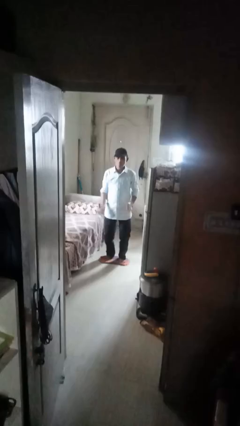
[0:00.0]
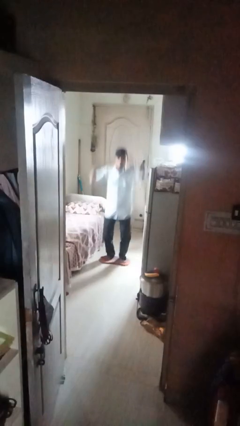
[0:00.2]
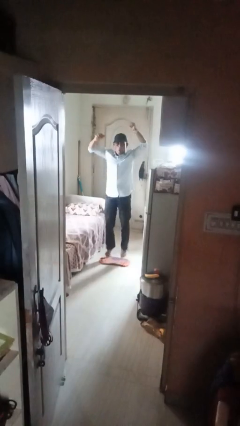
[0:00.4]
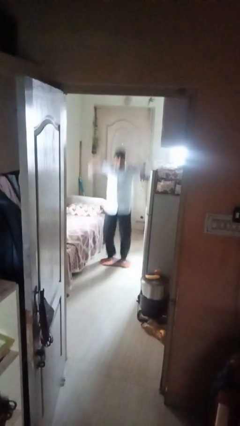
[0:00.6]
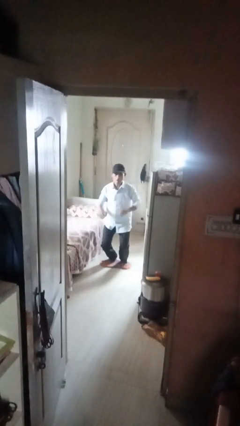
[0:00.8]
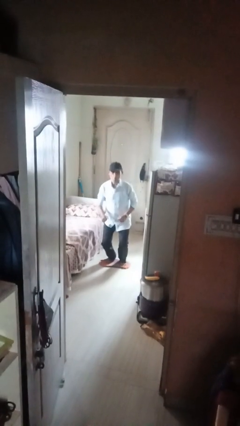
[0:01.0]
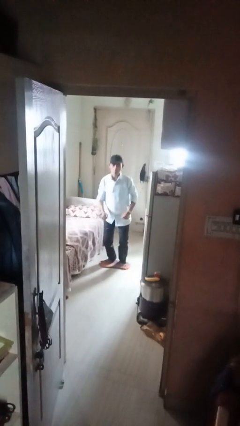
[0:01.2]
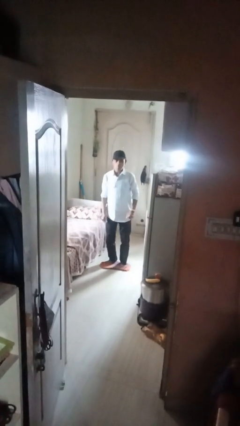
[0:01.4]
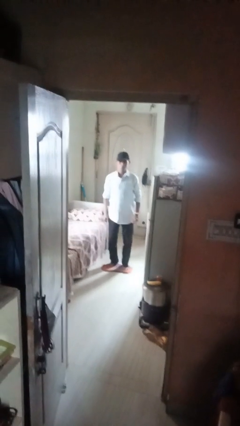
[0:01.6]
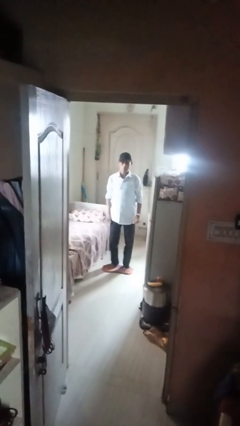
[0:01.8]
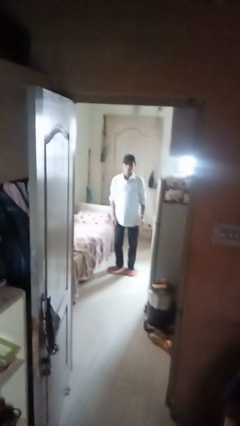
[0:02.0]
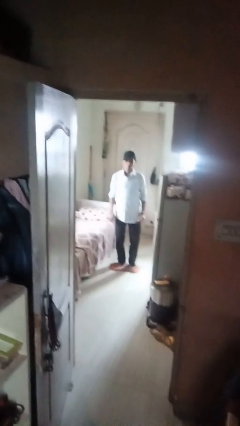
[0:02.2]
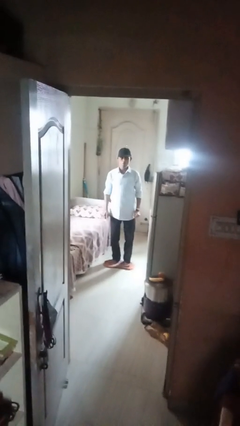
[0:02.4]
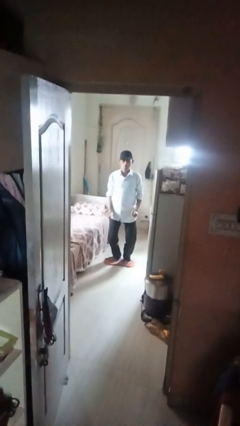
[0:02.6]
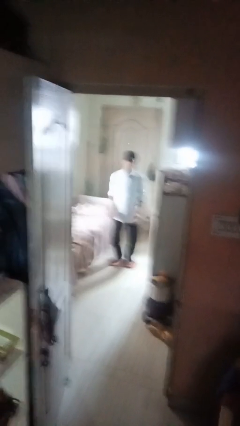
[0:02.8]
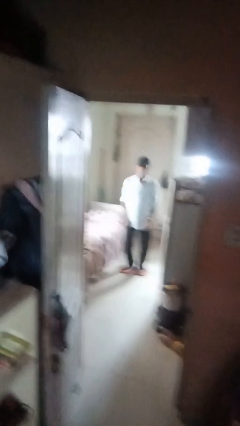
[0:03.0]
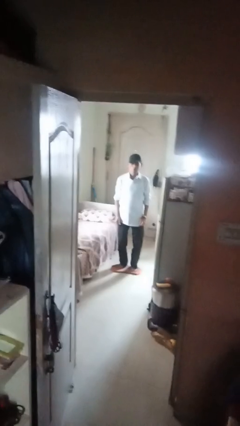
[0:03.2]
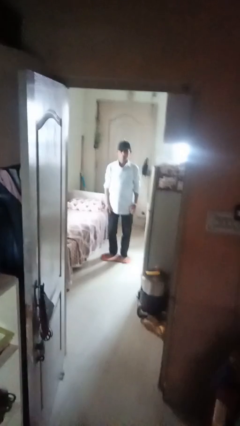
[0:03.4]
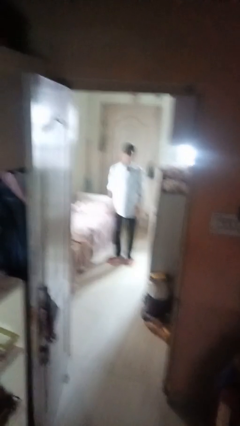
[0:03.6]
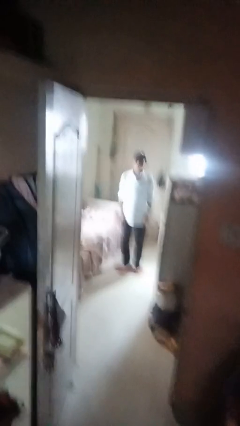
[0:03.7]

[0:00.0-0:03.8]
person jumps

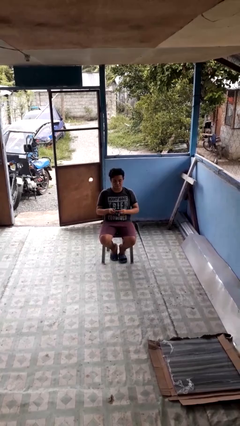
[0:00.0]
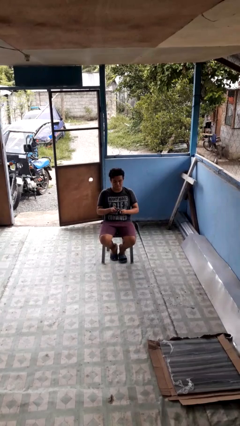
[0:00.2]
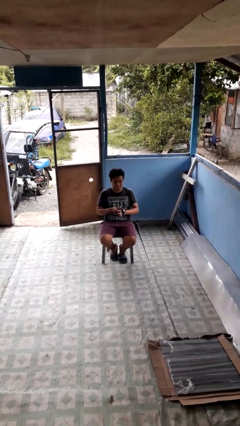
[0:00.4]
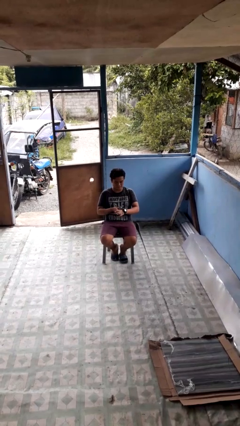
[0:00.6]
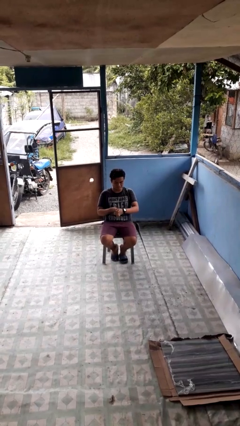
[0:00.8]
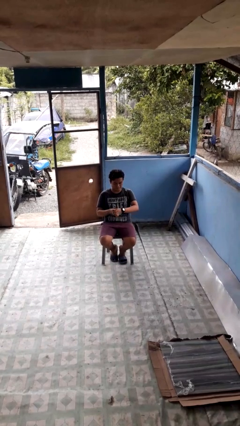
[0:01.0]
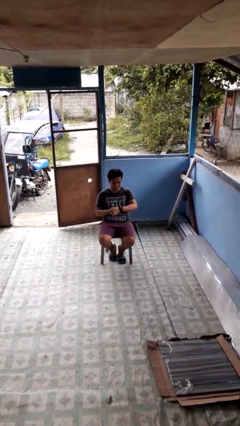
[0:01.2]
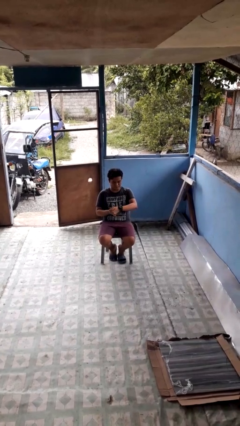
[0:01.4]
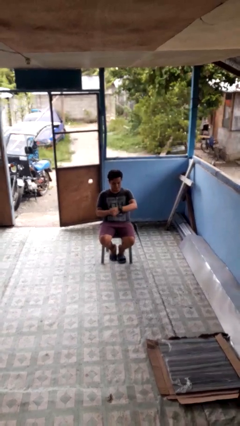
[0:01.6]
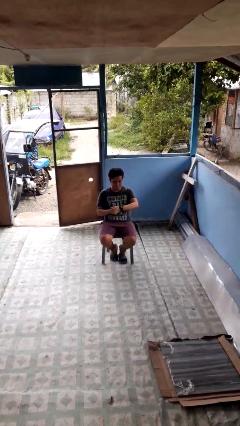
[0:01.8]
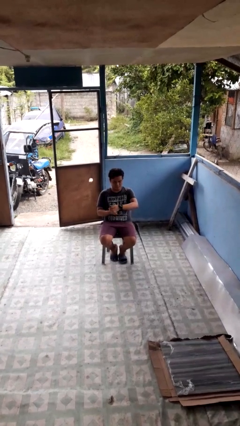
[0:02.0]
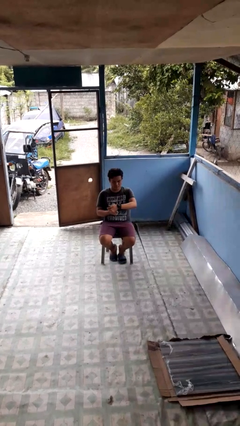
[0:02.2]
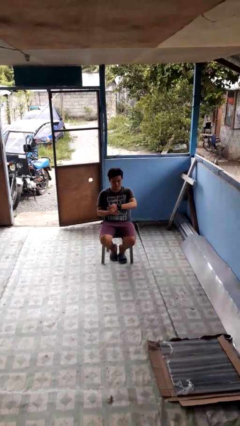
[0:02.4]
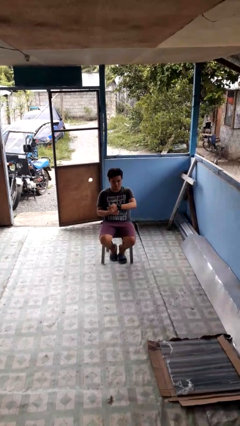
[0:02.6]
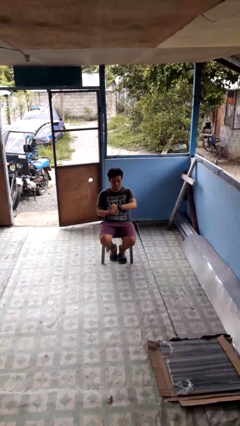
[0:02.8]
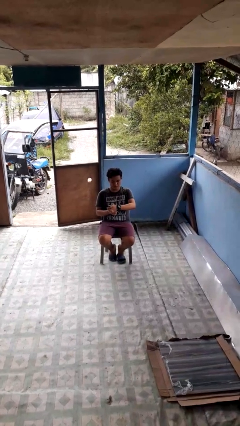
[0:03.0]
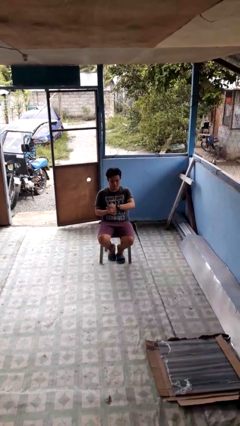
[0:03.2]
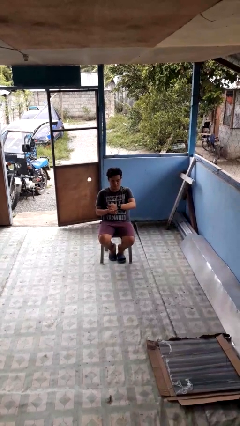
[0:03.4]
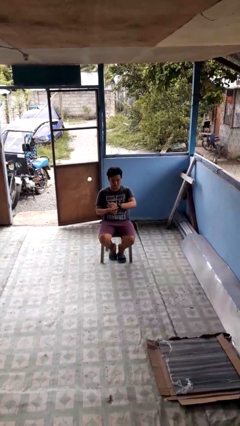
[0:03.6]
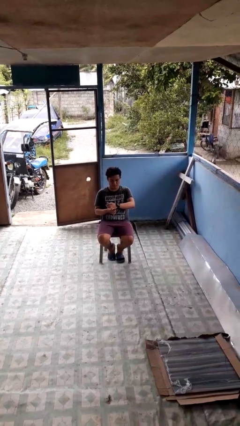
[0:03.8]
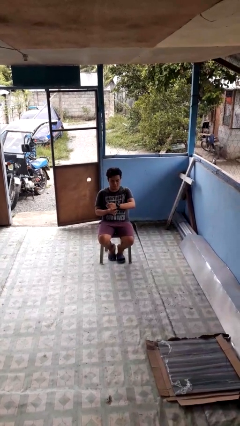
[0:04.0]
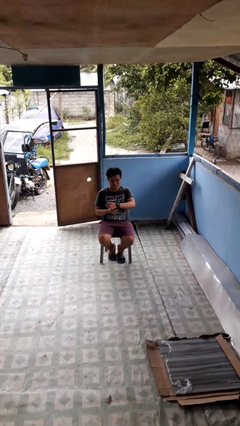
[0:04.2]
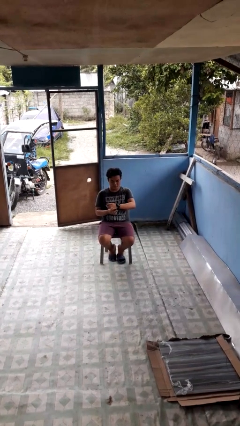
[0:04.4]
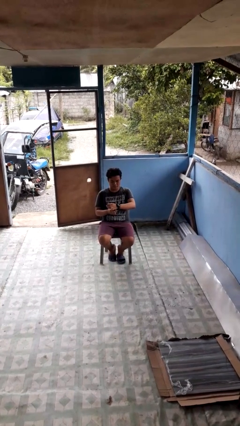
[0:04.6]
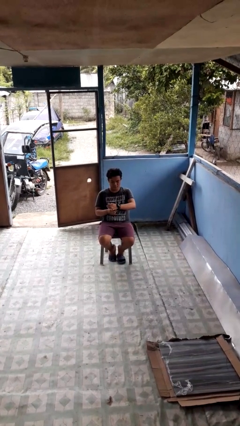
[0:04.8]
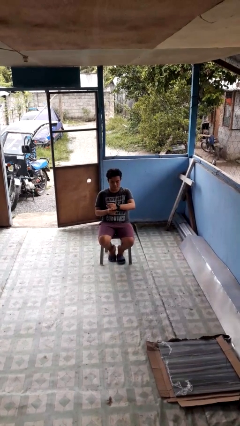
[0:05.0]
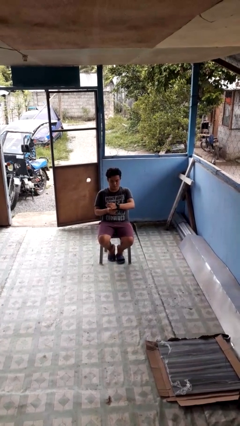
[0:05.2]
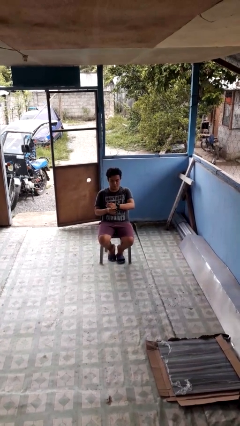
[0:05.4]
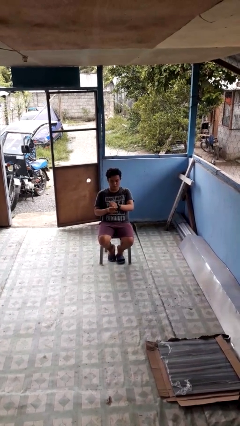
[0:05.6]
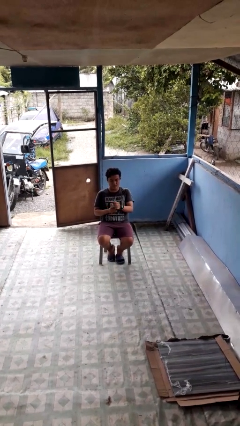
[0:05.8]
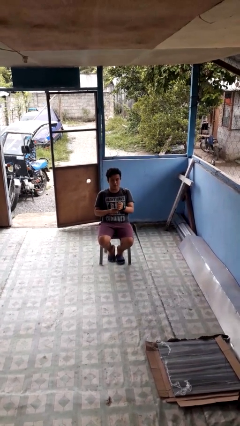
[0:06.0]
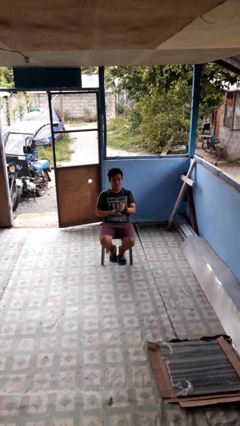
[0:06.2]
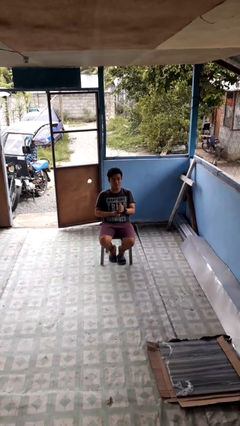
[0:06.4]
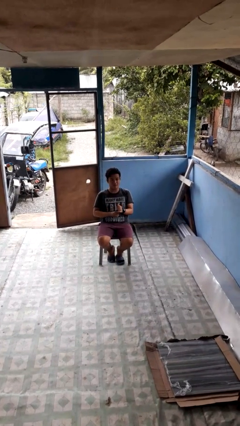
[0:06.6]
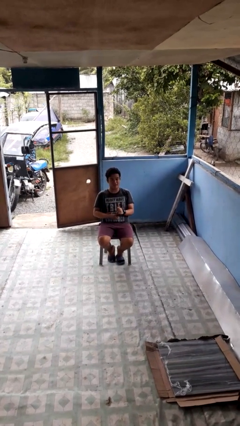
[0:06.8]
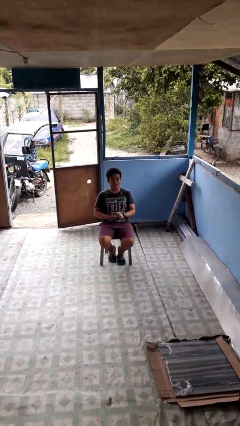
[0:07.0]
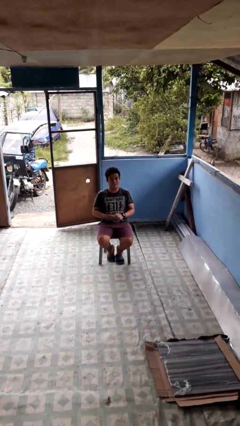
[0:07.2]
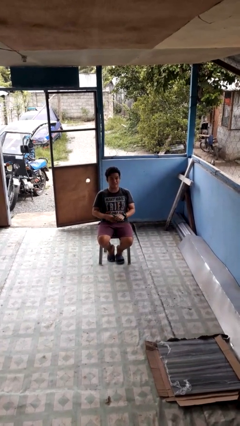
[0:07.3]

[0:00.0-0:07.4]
person puts on wristwatch

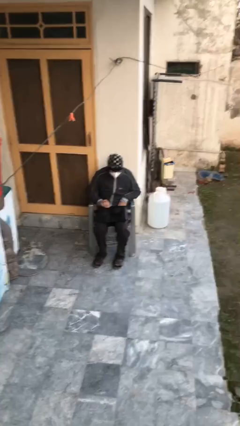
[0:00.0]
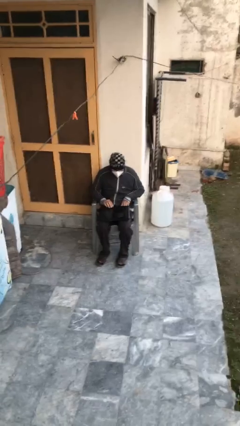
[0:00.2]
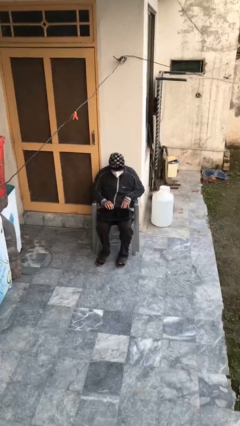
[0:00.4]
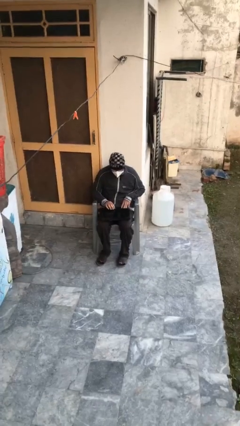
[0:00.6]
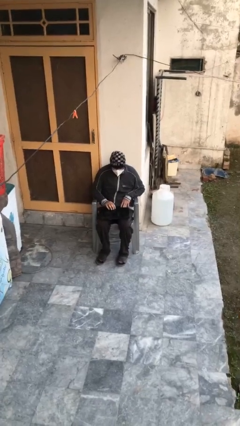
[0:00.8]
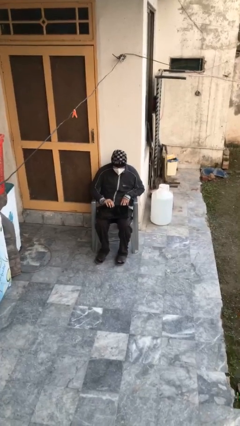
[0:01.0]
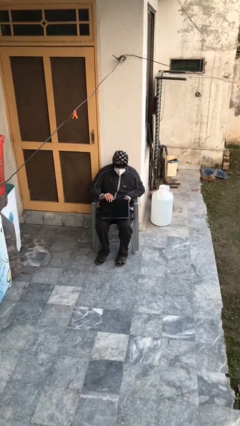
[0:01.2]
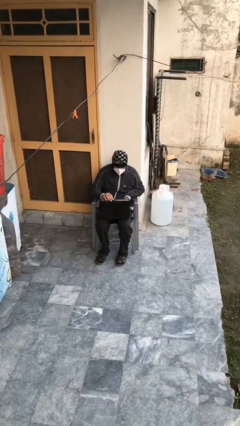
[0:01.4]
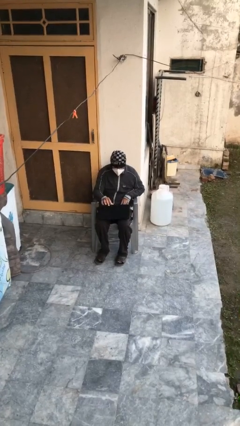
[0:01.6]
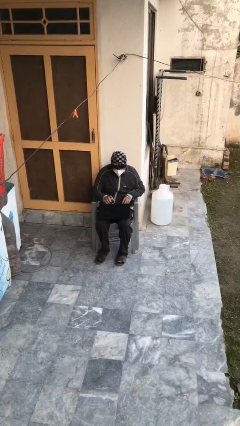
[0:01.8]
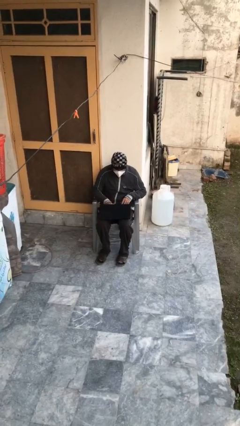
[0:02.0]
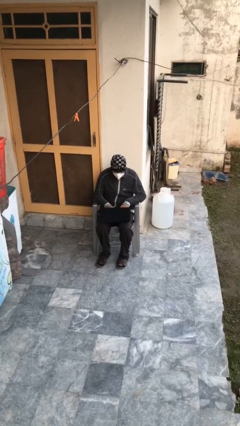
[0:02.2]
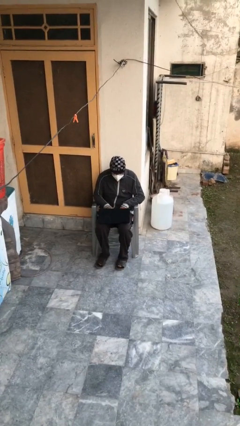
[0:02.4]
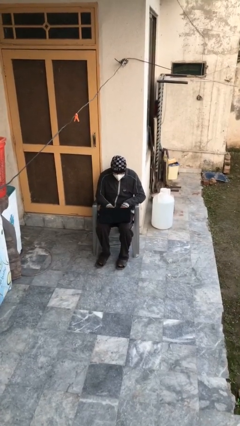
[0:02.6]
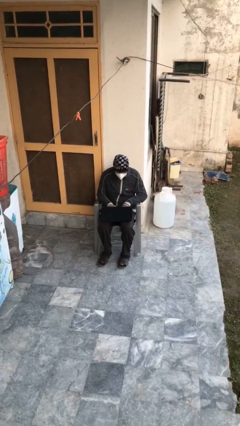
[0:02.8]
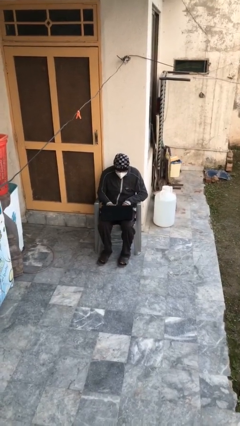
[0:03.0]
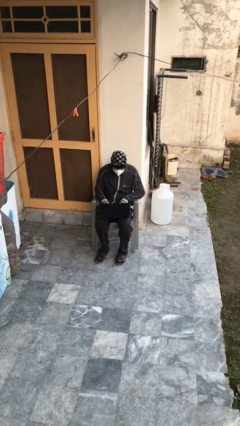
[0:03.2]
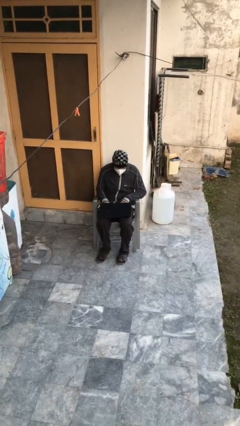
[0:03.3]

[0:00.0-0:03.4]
person interacts with laptop

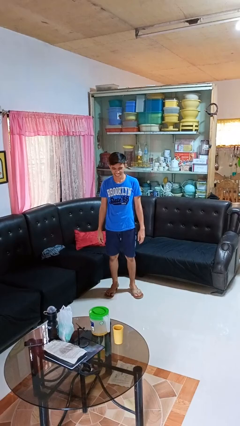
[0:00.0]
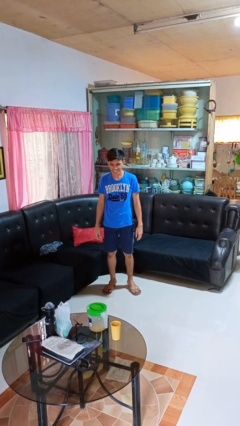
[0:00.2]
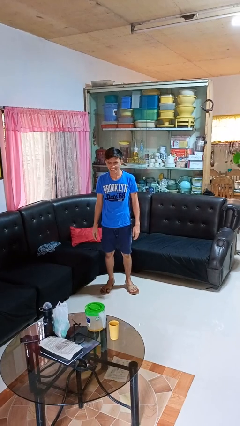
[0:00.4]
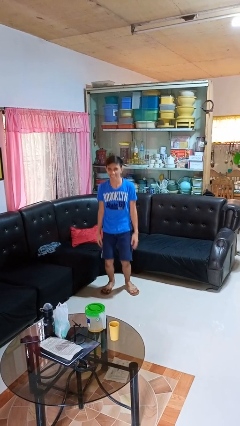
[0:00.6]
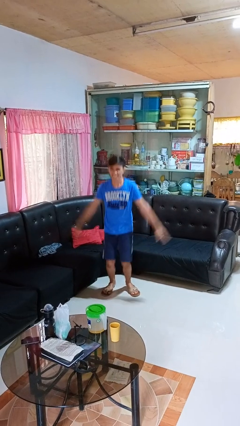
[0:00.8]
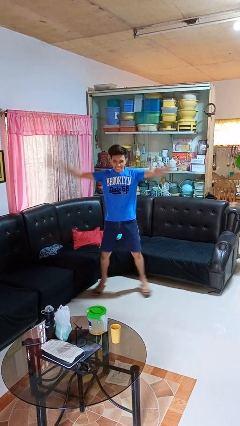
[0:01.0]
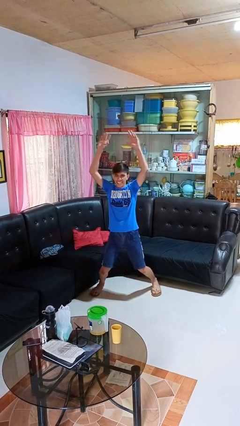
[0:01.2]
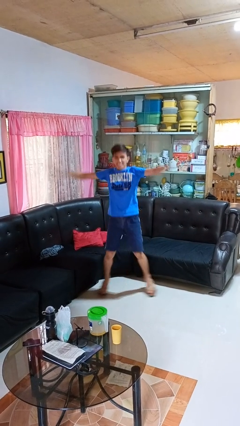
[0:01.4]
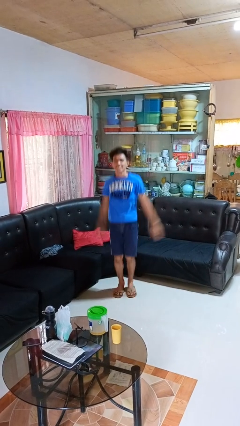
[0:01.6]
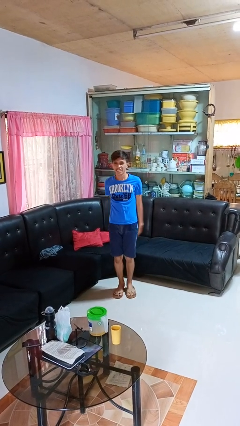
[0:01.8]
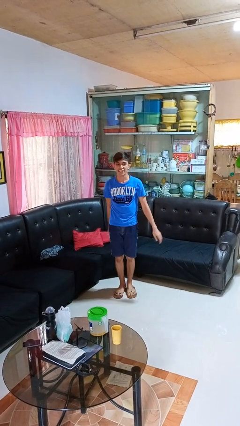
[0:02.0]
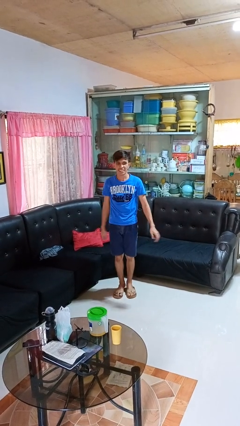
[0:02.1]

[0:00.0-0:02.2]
person exercises with jumping jacks

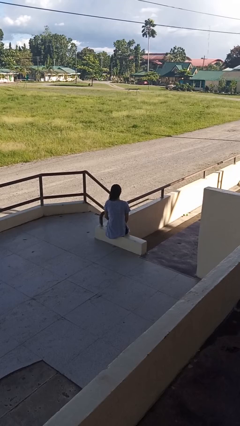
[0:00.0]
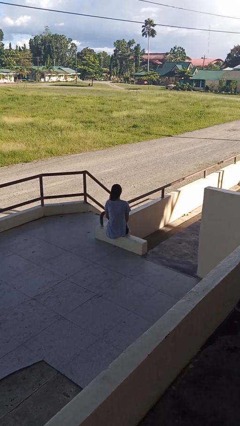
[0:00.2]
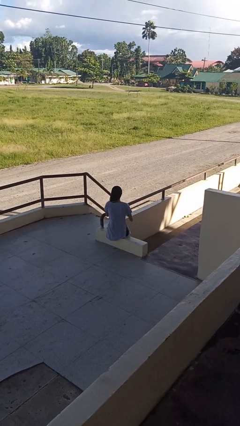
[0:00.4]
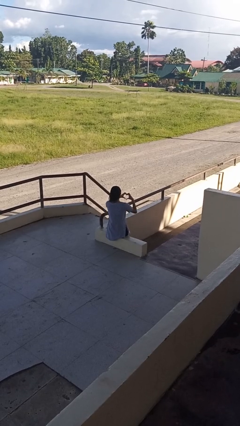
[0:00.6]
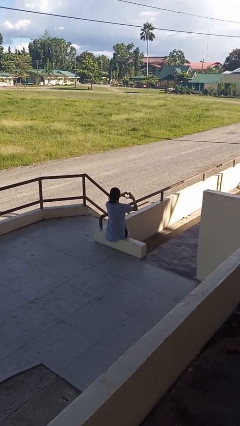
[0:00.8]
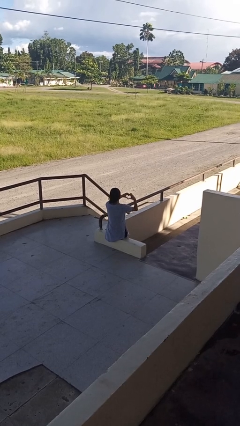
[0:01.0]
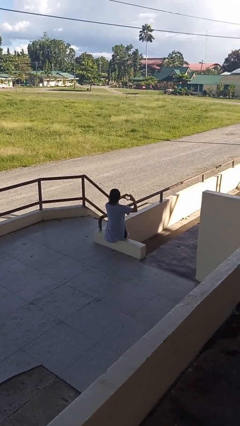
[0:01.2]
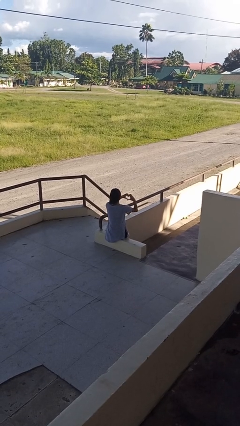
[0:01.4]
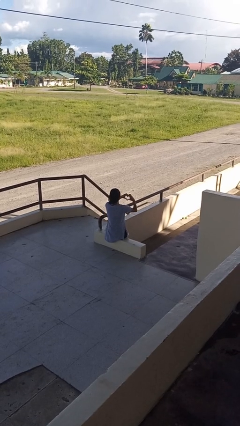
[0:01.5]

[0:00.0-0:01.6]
person gestures heart
